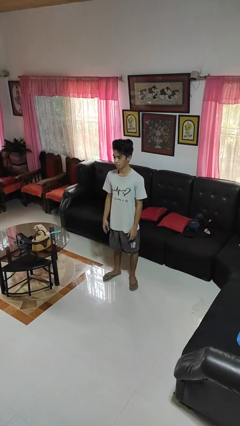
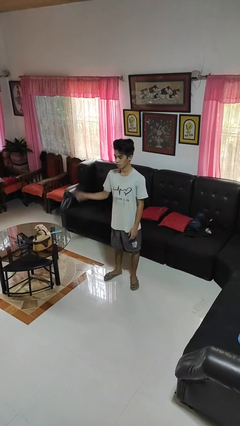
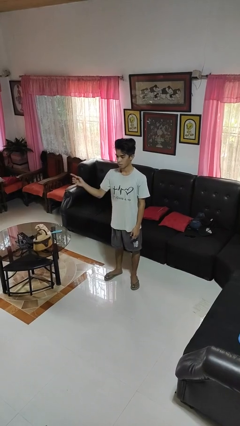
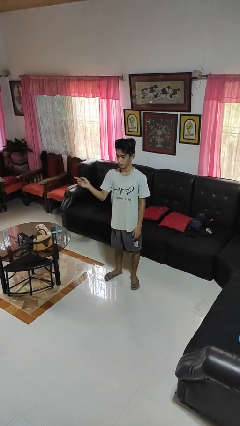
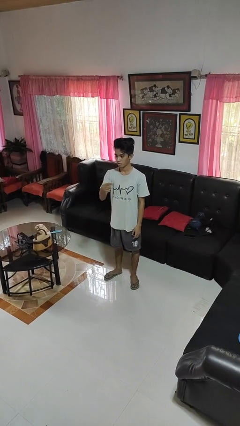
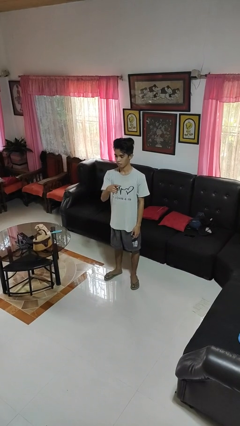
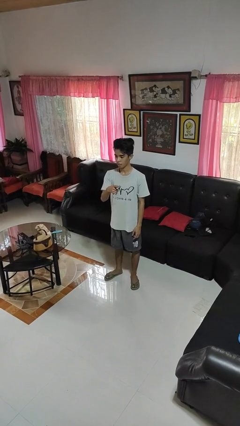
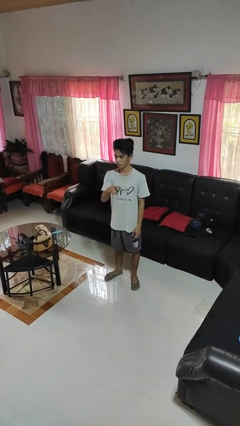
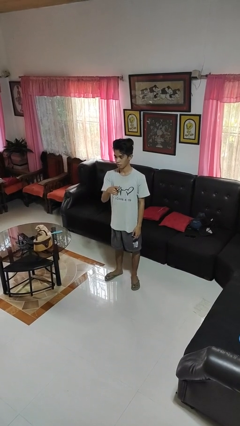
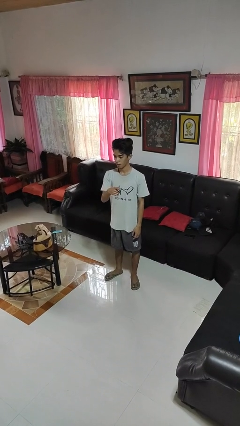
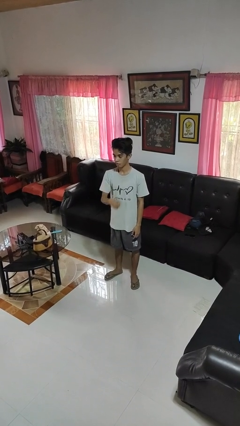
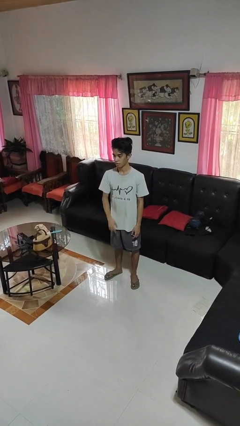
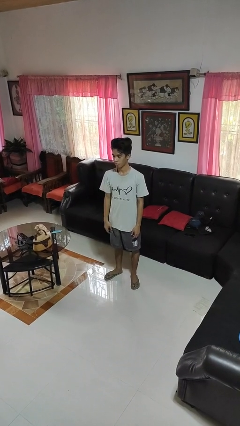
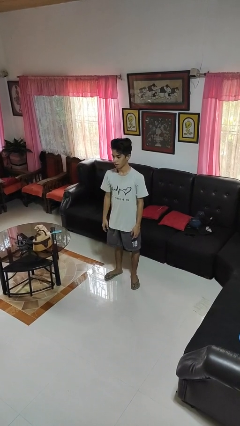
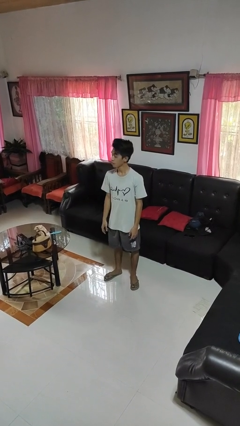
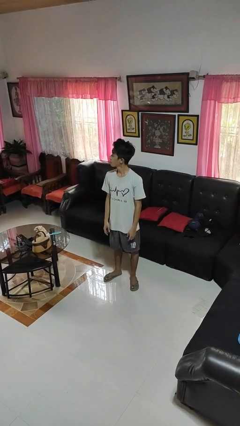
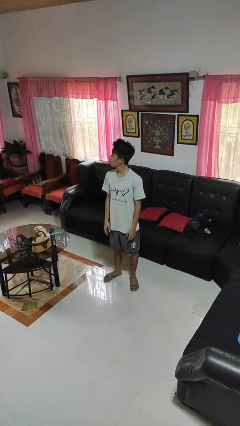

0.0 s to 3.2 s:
person gestures swipe left

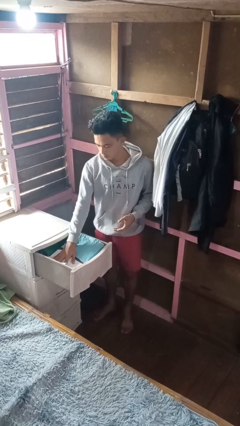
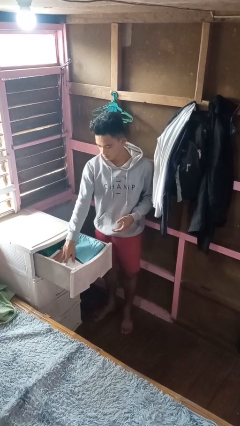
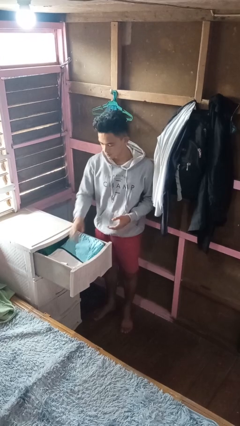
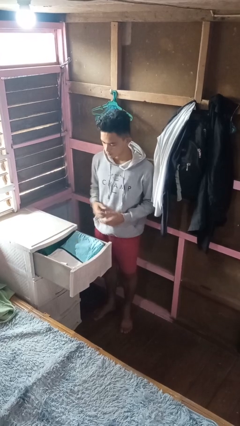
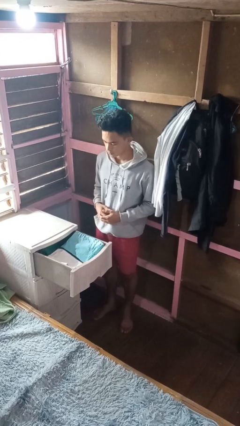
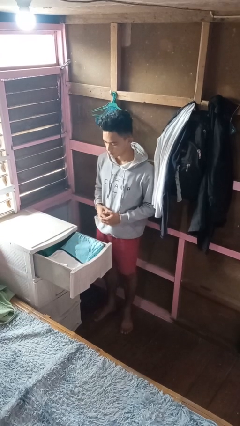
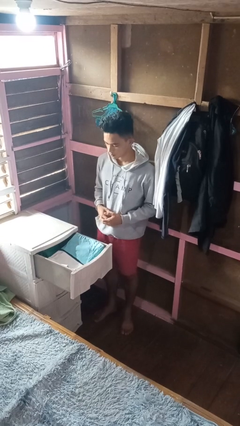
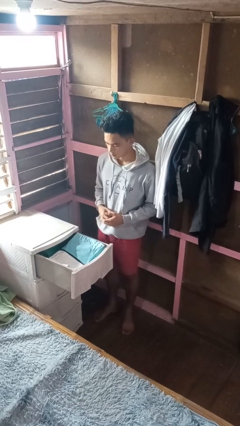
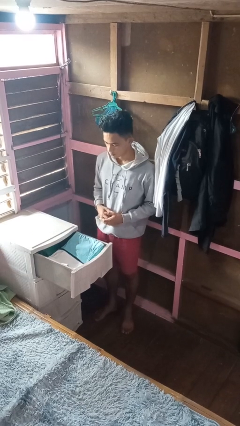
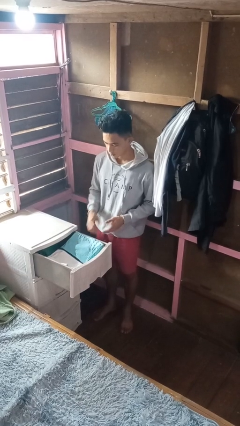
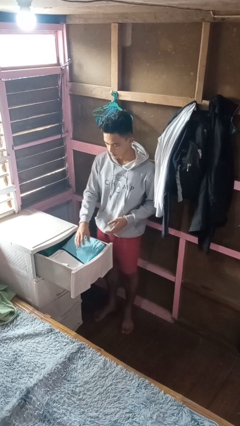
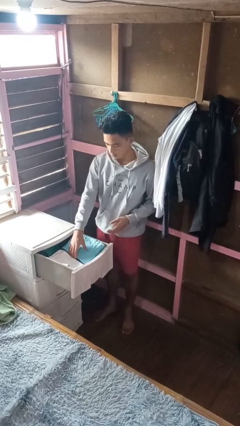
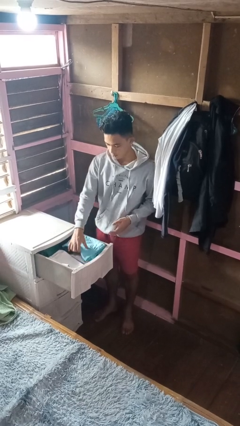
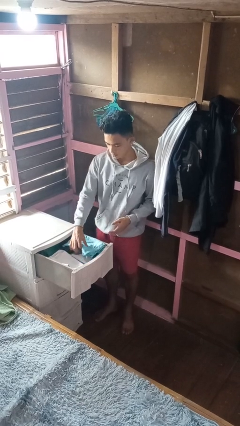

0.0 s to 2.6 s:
person puts clothes into dresser

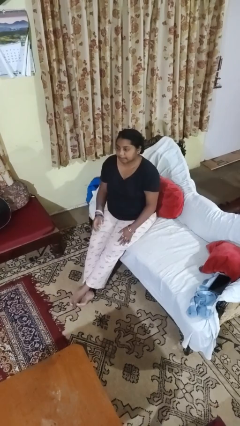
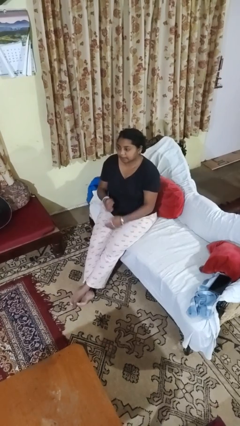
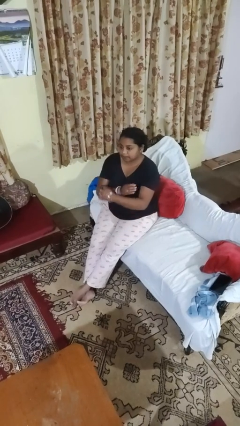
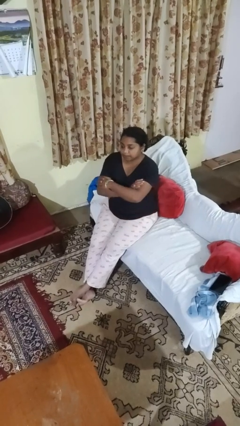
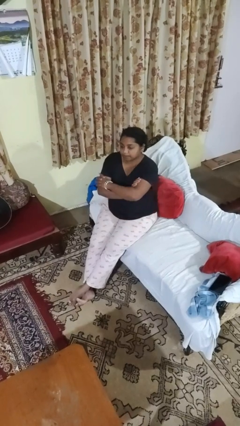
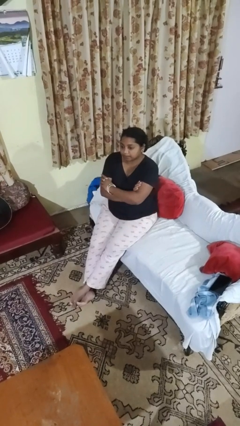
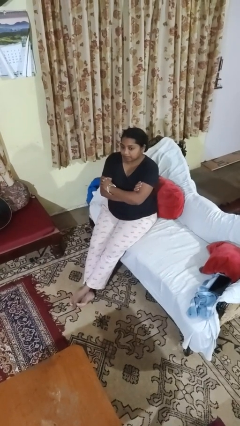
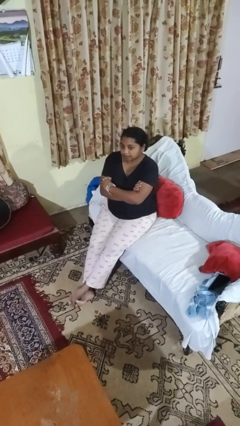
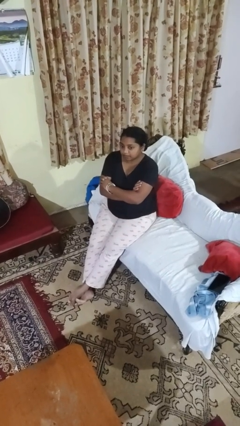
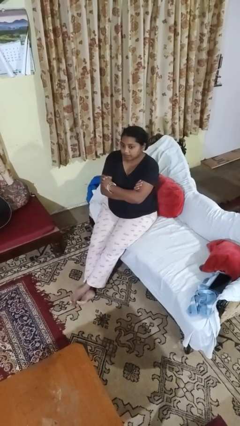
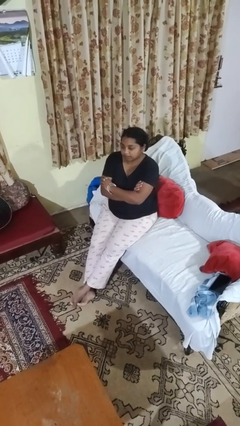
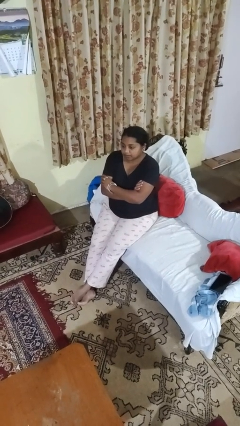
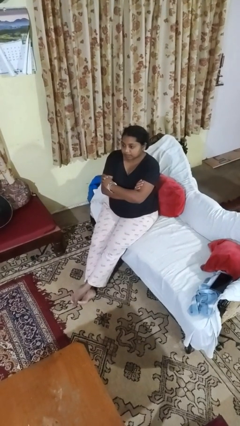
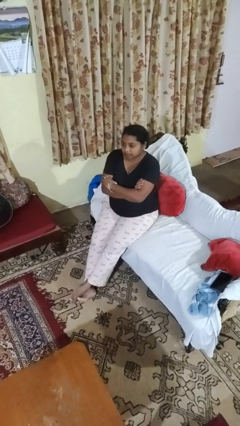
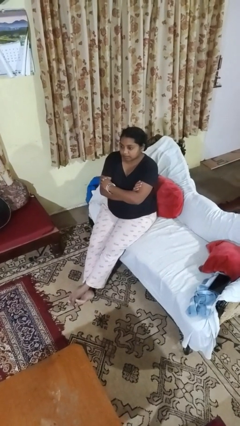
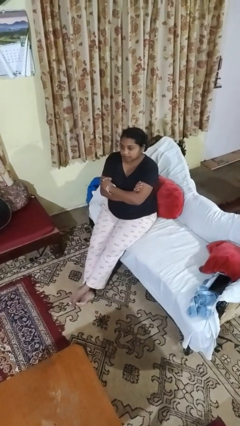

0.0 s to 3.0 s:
person crosses arms

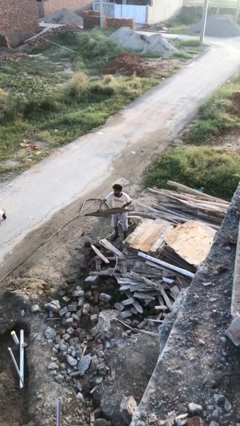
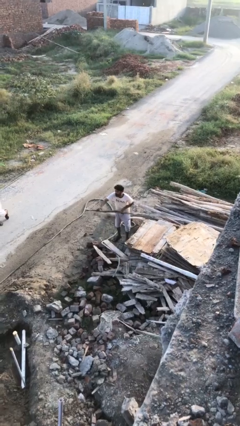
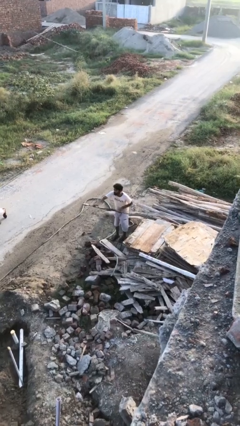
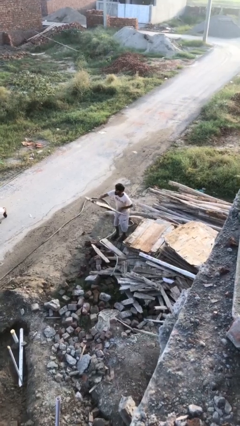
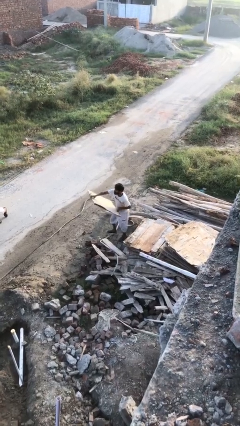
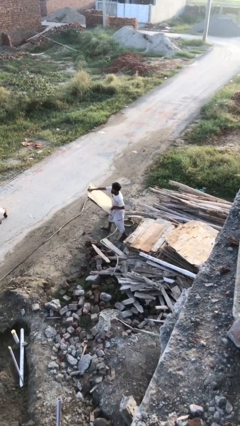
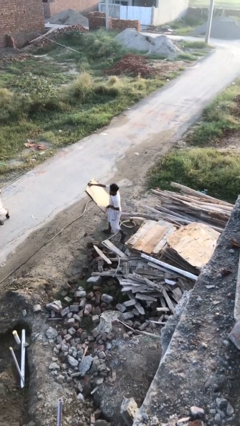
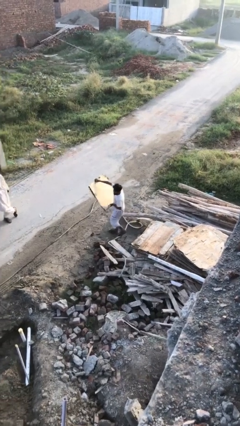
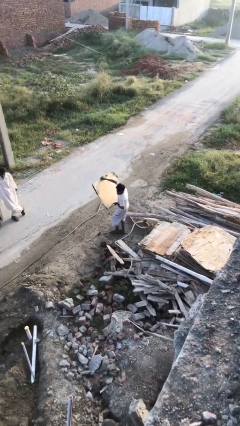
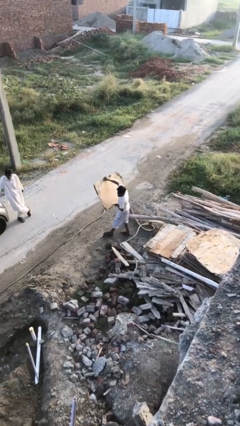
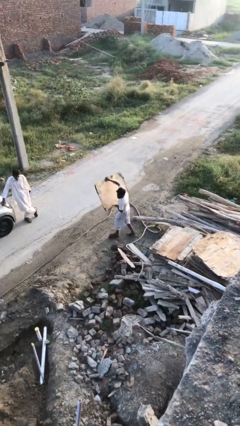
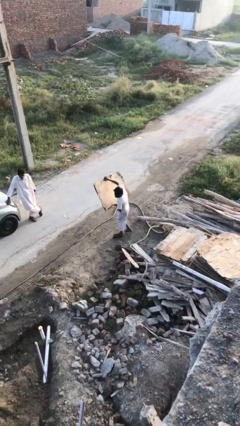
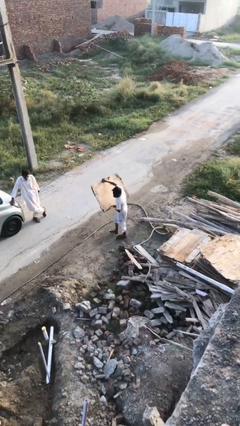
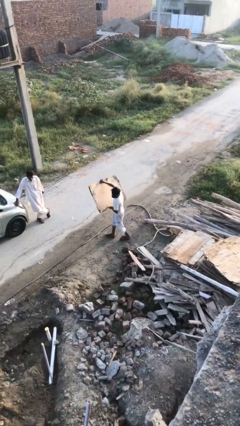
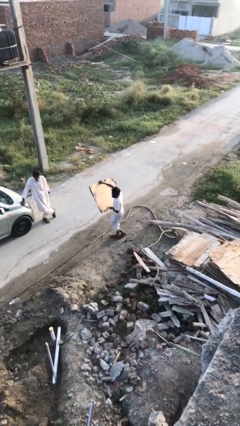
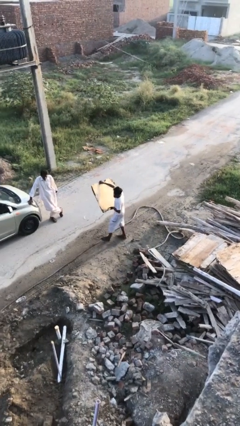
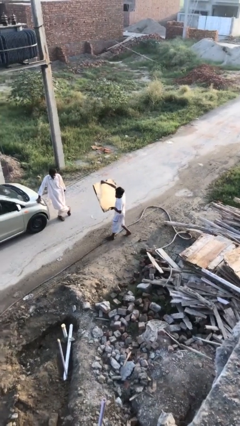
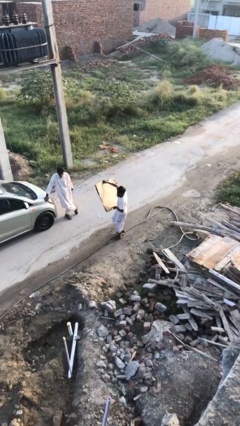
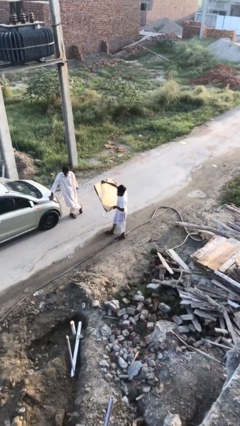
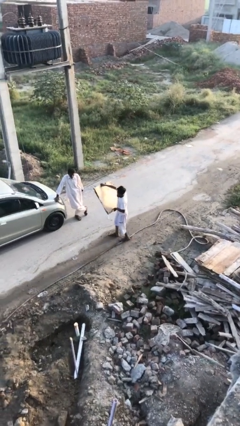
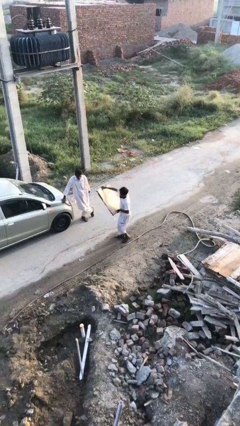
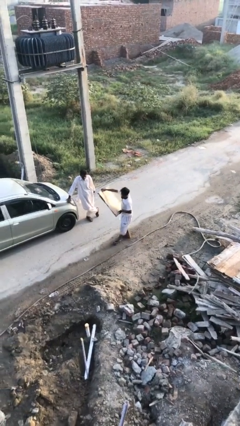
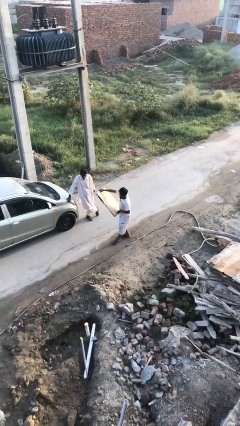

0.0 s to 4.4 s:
person carries heavy object

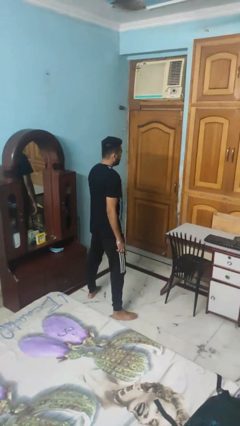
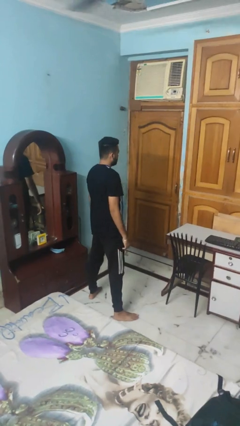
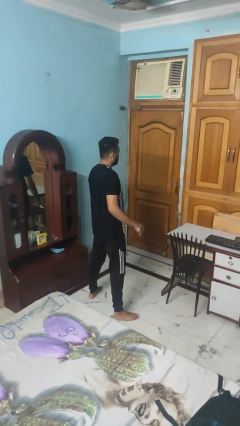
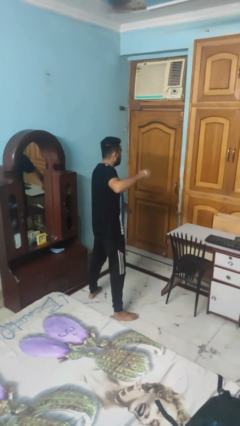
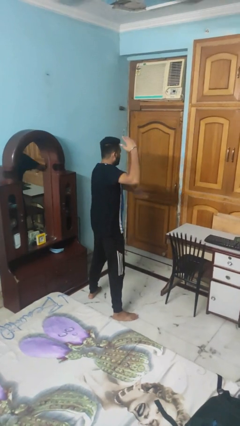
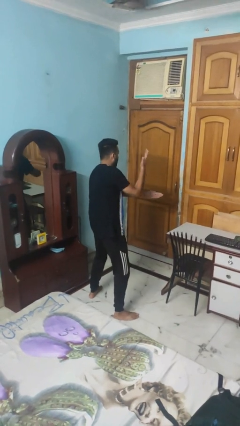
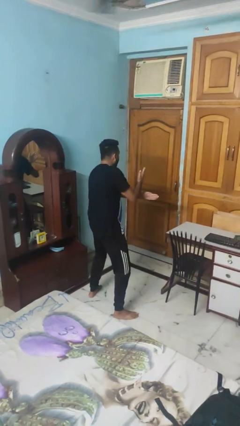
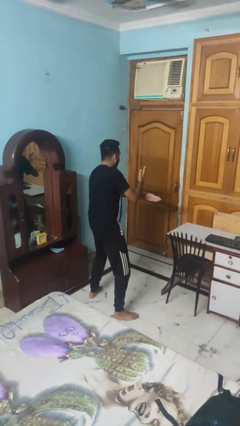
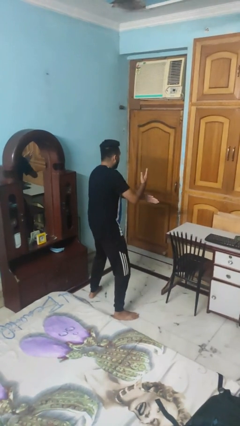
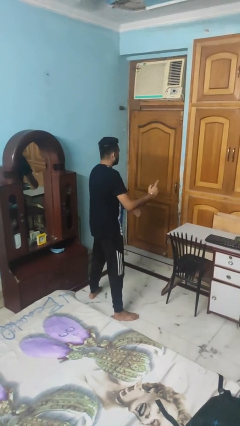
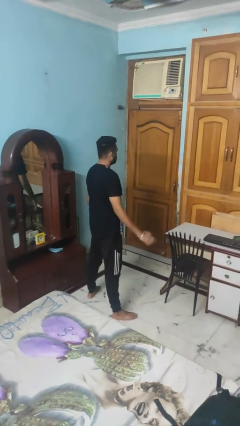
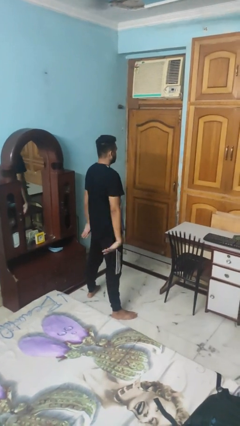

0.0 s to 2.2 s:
person karate chop

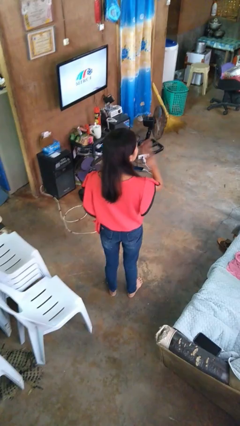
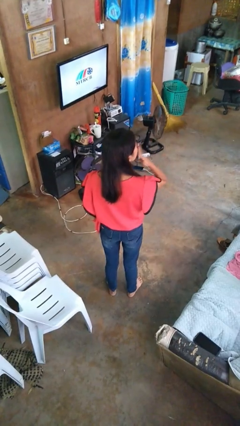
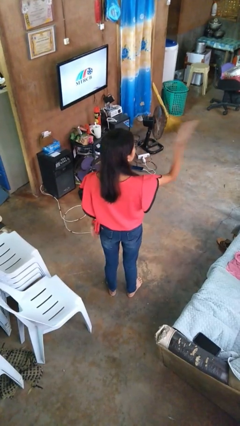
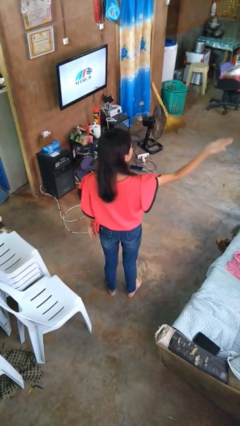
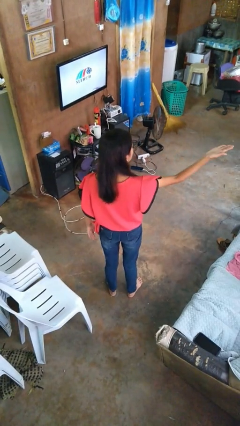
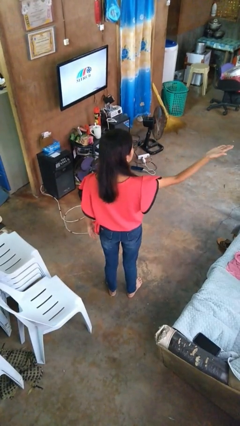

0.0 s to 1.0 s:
person gestures blow kiss

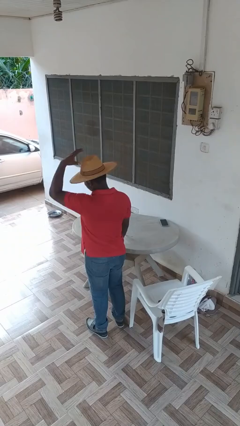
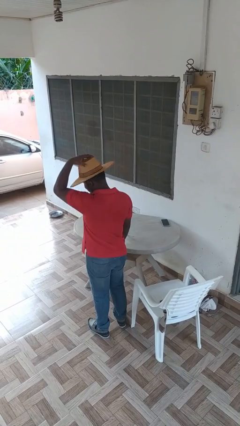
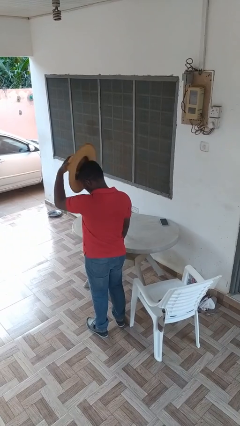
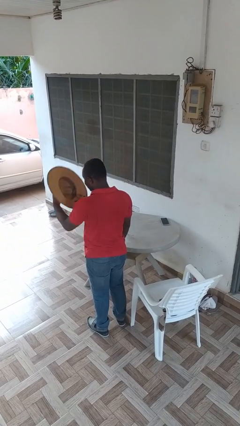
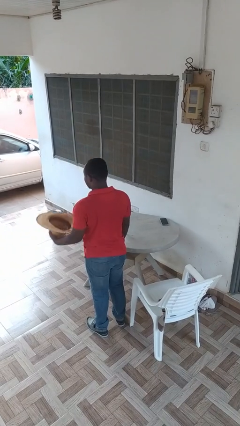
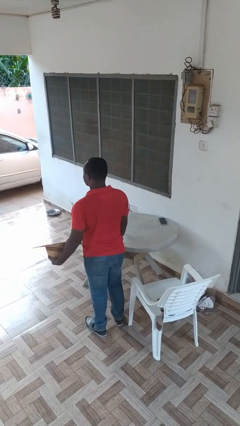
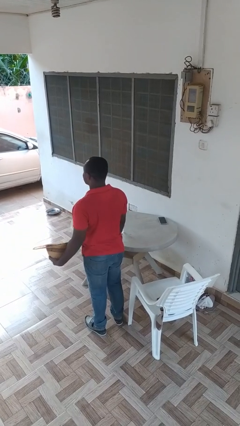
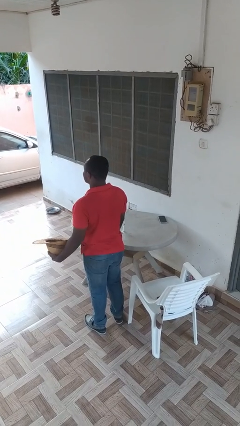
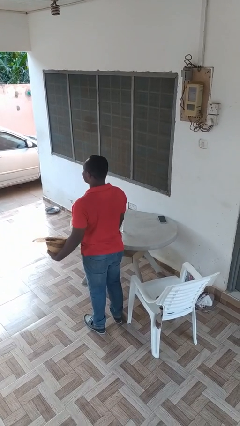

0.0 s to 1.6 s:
person takes off hat
